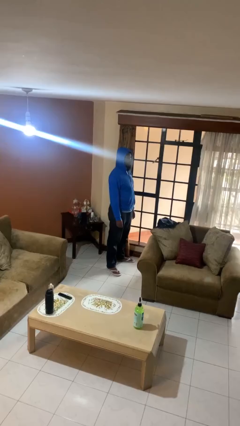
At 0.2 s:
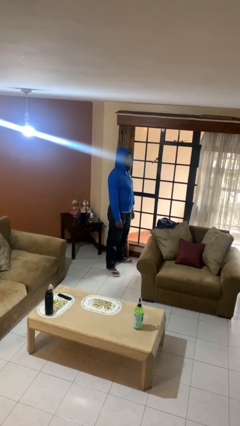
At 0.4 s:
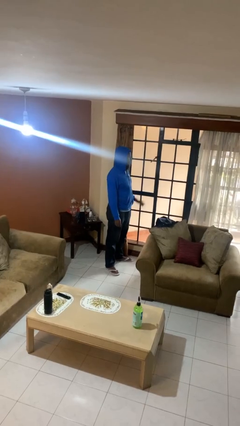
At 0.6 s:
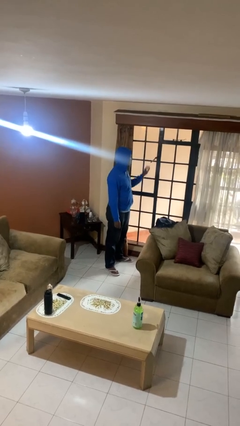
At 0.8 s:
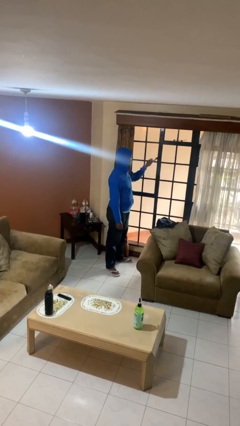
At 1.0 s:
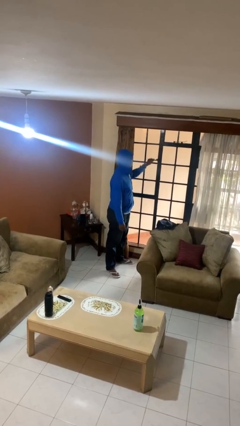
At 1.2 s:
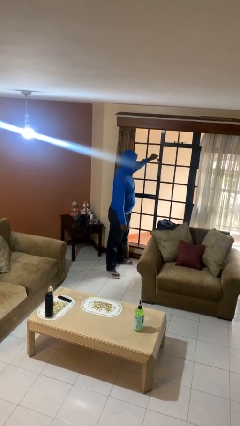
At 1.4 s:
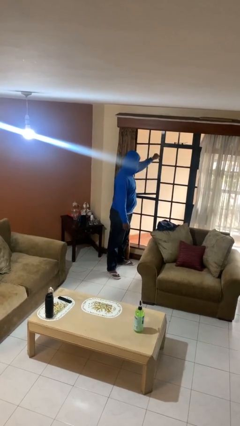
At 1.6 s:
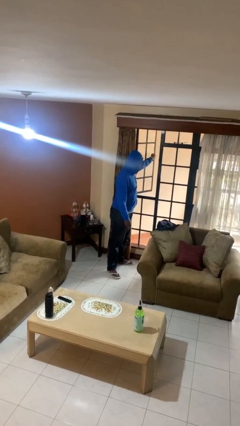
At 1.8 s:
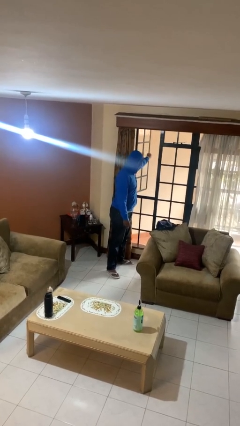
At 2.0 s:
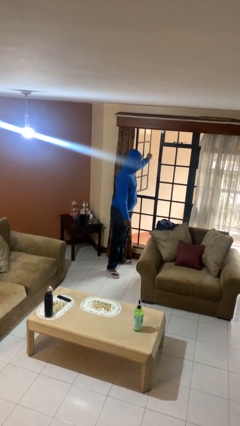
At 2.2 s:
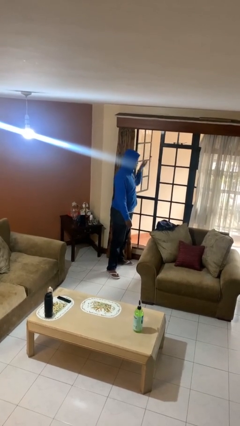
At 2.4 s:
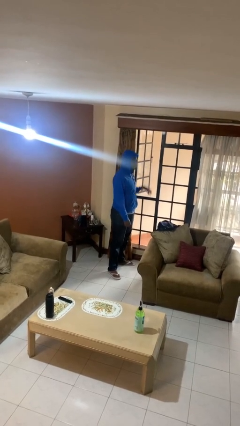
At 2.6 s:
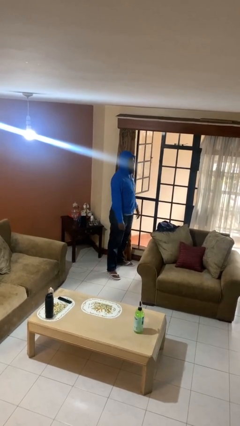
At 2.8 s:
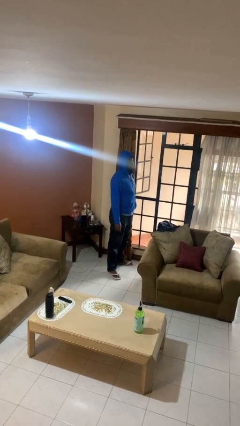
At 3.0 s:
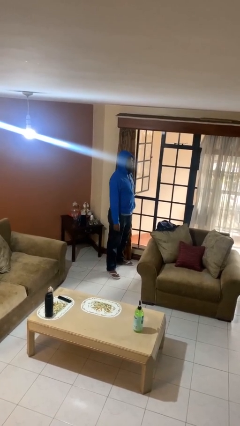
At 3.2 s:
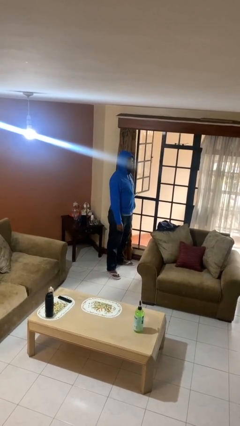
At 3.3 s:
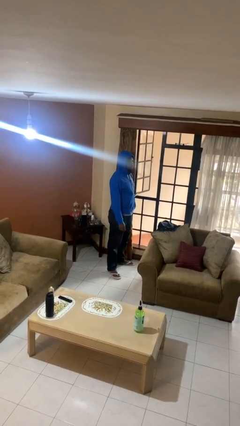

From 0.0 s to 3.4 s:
person opens home window

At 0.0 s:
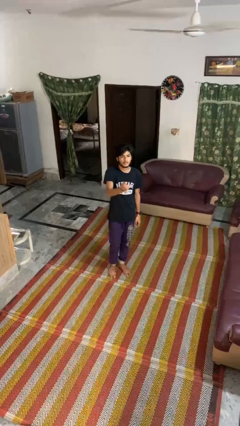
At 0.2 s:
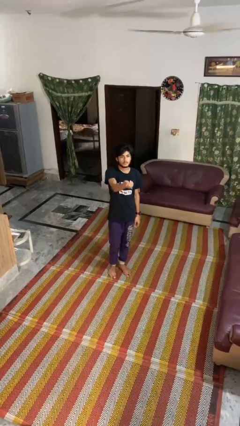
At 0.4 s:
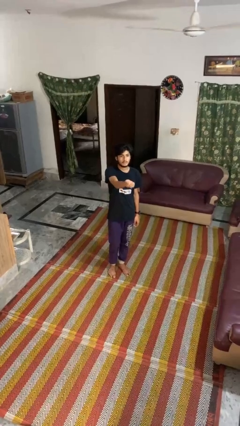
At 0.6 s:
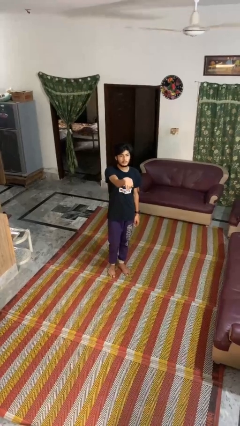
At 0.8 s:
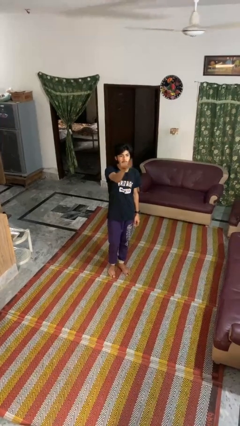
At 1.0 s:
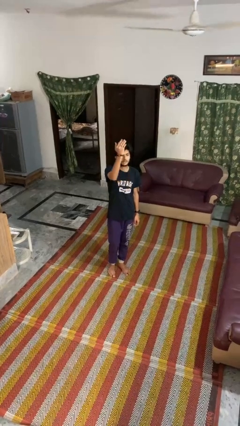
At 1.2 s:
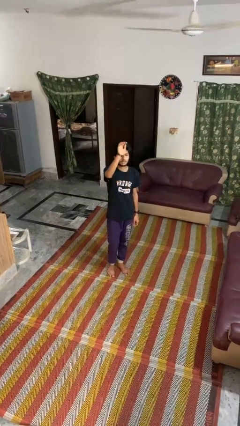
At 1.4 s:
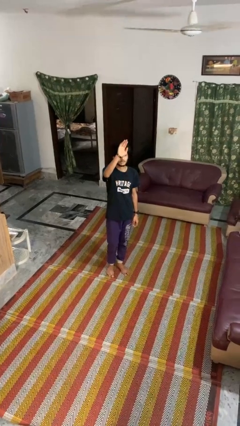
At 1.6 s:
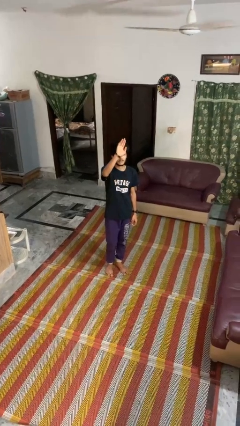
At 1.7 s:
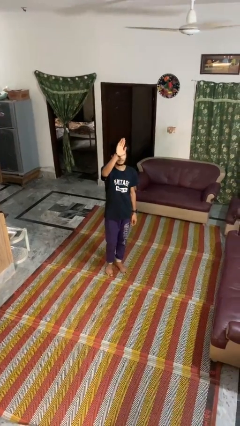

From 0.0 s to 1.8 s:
person gestures swipe up

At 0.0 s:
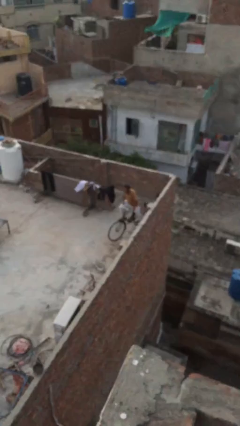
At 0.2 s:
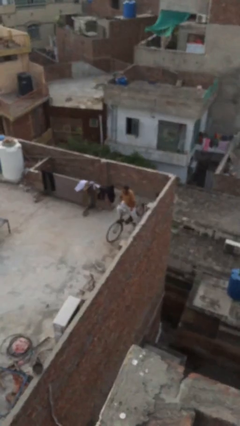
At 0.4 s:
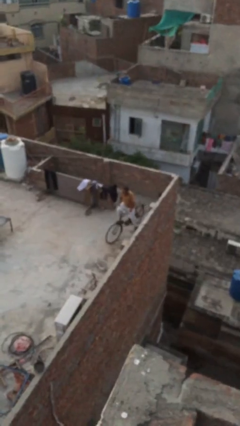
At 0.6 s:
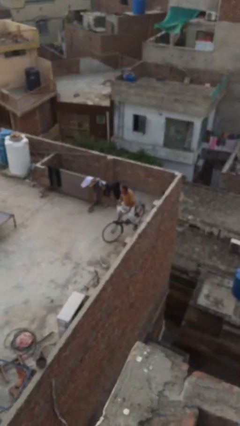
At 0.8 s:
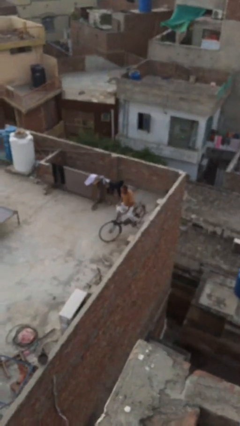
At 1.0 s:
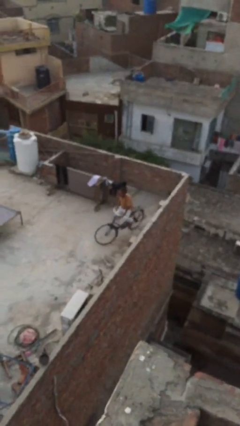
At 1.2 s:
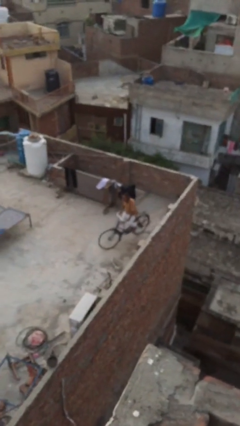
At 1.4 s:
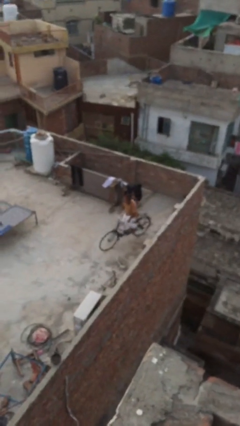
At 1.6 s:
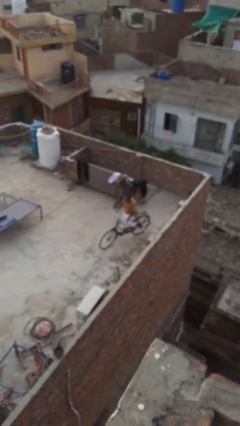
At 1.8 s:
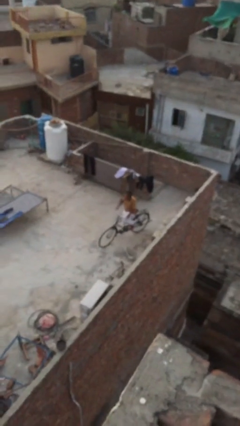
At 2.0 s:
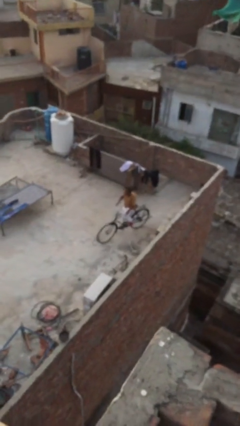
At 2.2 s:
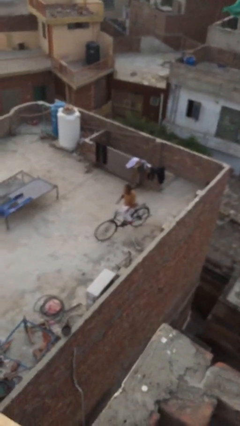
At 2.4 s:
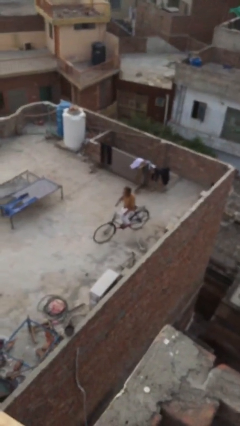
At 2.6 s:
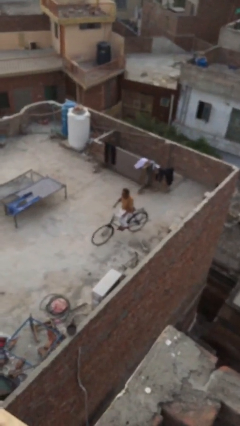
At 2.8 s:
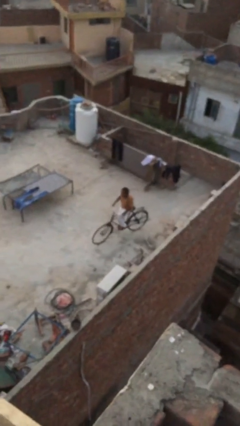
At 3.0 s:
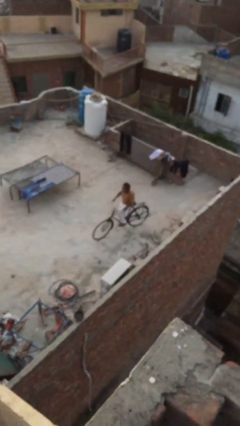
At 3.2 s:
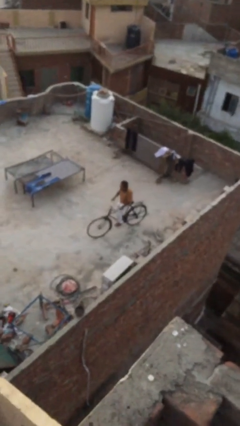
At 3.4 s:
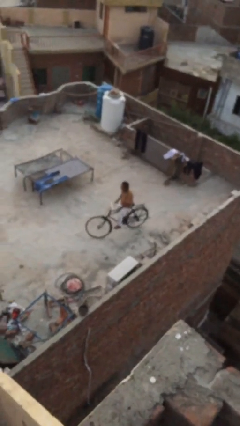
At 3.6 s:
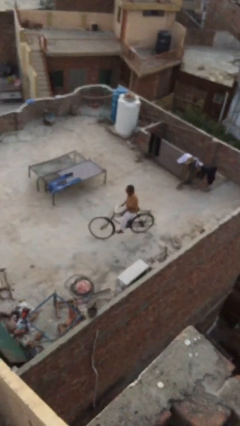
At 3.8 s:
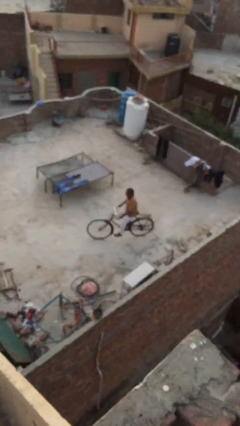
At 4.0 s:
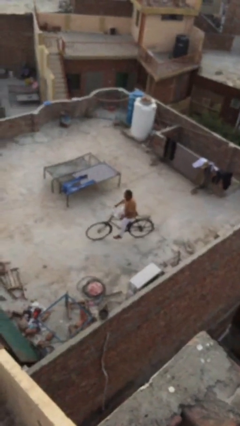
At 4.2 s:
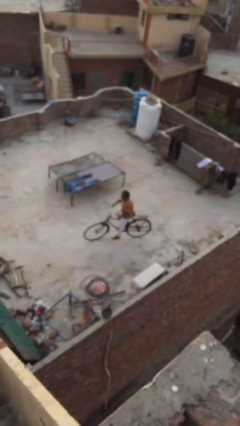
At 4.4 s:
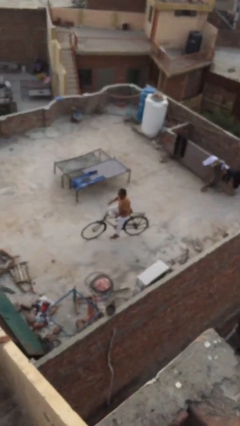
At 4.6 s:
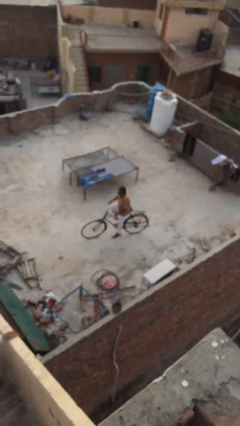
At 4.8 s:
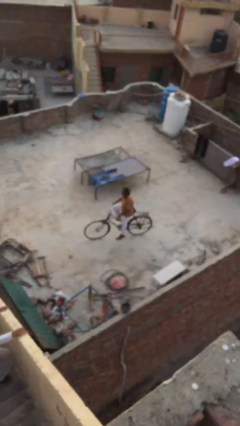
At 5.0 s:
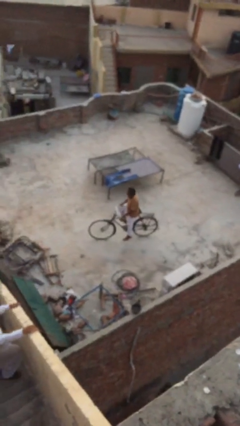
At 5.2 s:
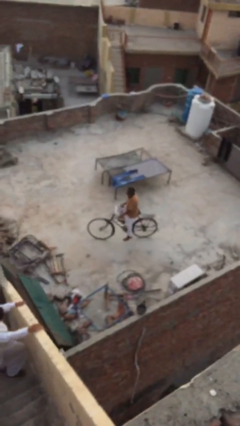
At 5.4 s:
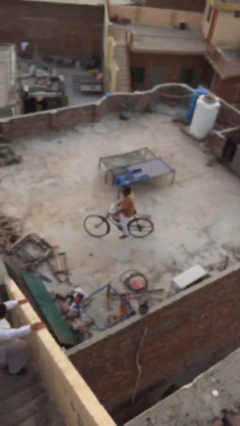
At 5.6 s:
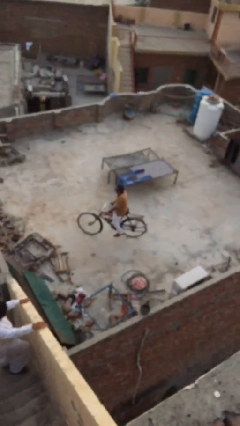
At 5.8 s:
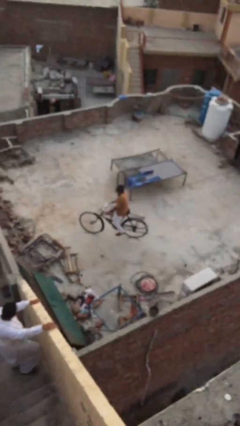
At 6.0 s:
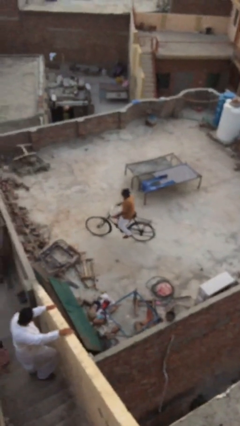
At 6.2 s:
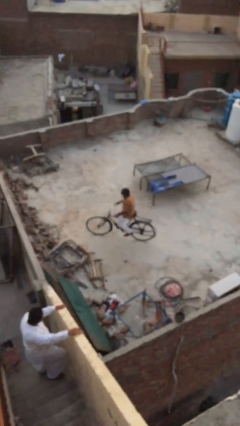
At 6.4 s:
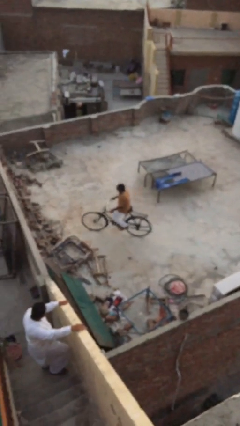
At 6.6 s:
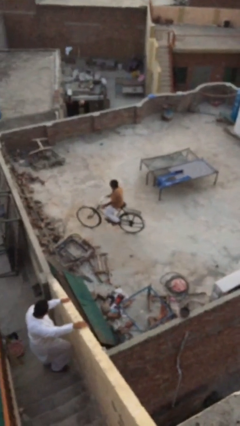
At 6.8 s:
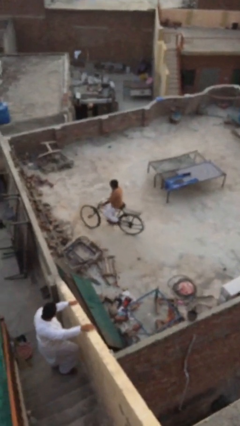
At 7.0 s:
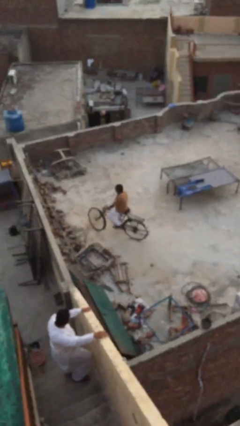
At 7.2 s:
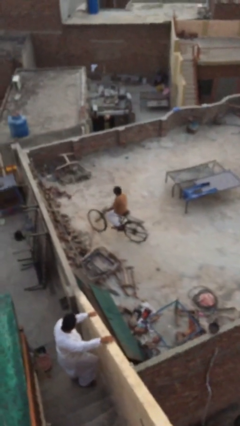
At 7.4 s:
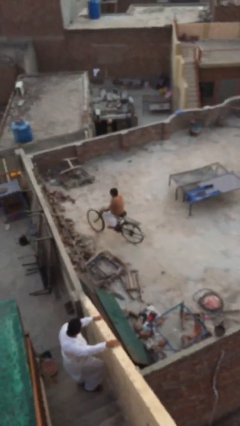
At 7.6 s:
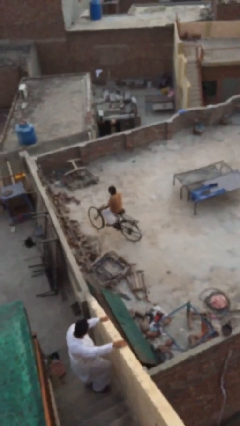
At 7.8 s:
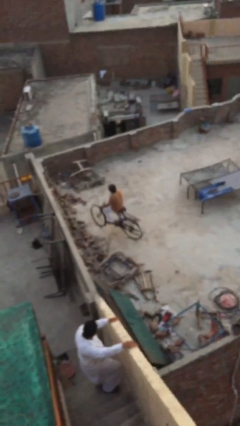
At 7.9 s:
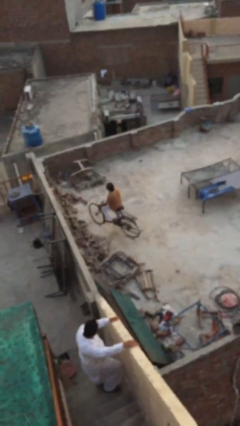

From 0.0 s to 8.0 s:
person rides bicycle

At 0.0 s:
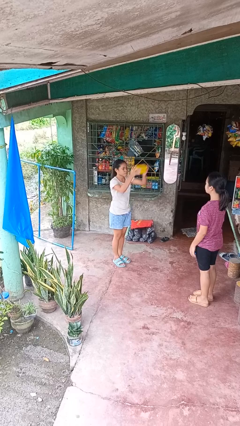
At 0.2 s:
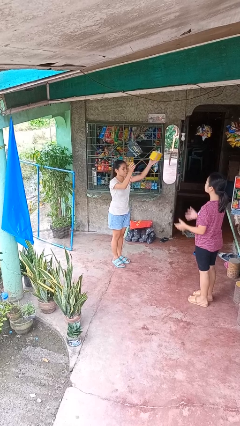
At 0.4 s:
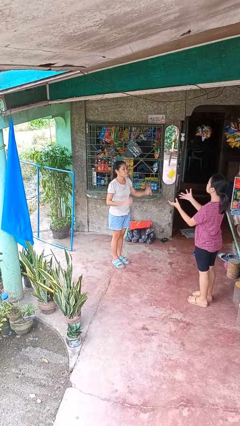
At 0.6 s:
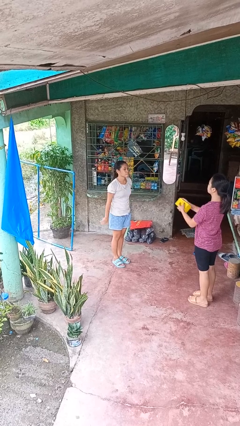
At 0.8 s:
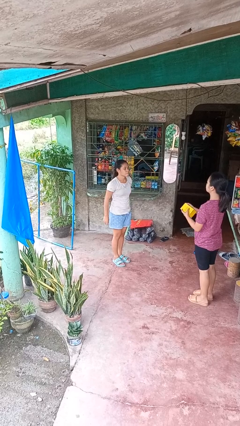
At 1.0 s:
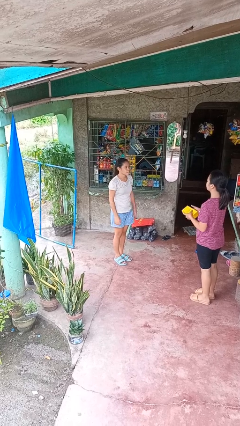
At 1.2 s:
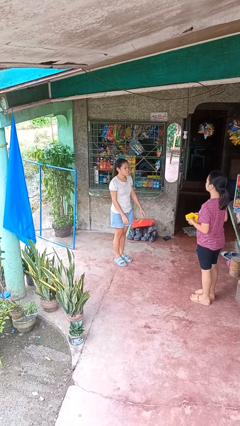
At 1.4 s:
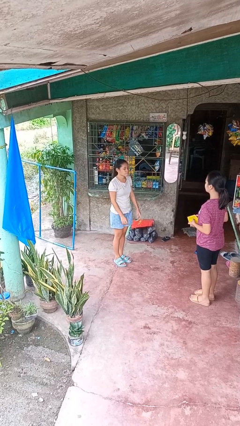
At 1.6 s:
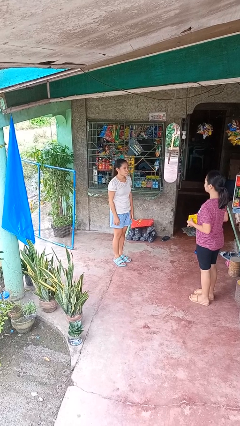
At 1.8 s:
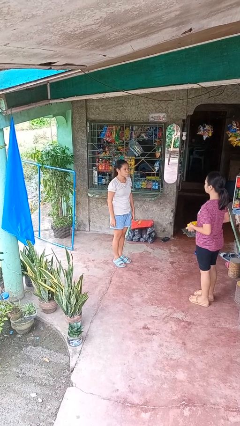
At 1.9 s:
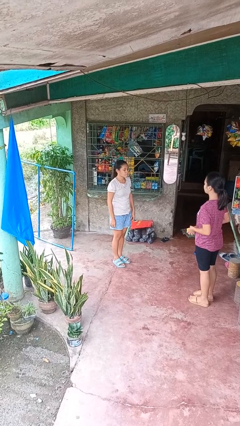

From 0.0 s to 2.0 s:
person throws object to person

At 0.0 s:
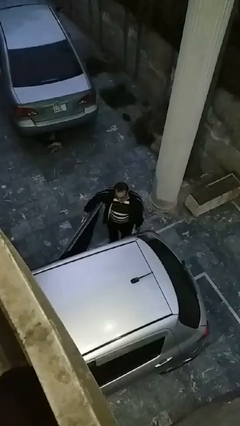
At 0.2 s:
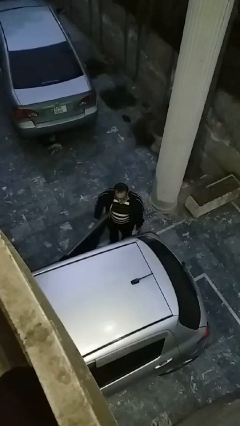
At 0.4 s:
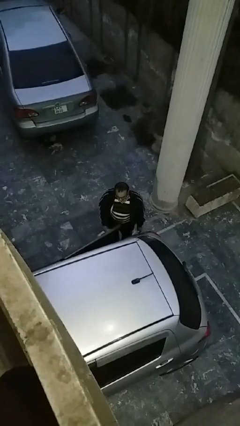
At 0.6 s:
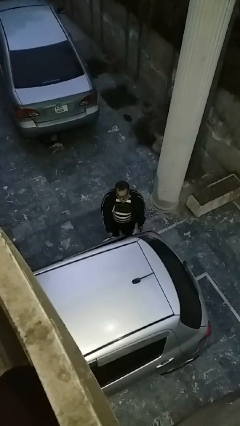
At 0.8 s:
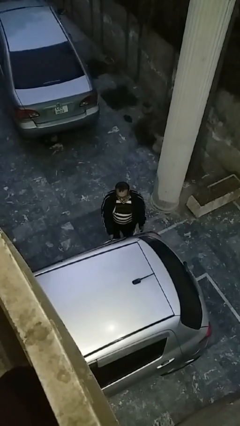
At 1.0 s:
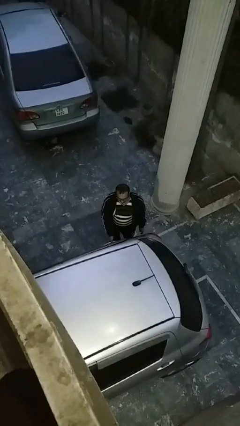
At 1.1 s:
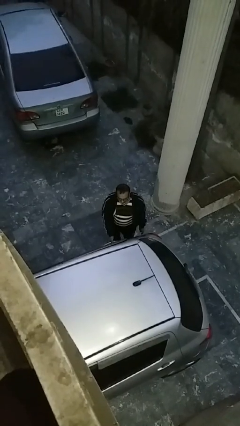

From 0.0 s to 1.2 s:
person closes car door

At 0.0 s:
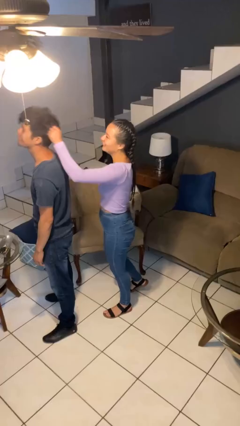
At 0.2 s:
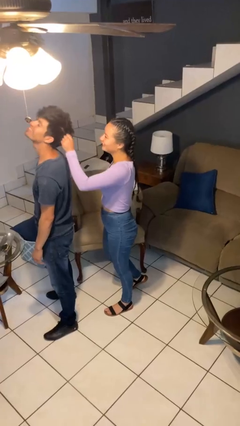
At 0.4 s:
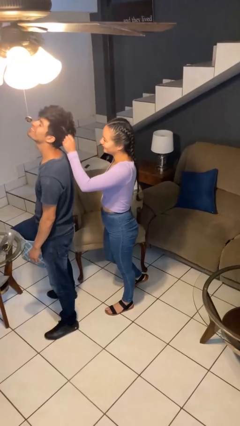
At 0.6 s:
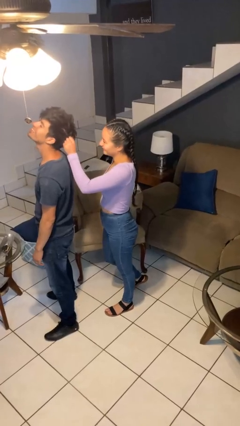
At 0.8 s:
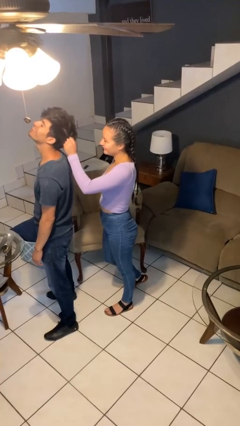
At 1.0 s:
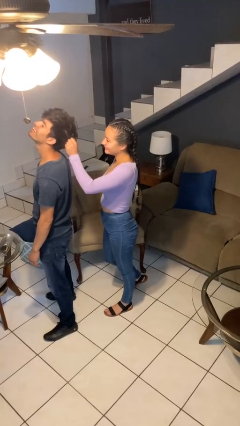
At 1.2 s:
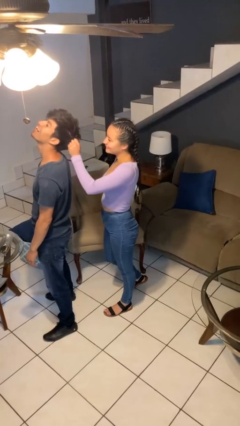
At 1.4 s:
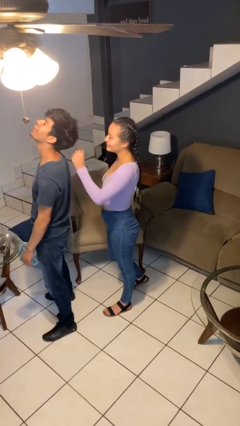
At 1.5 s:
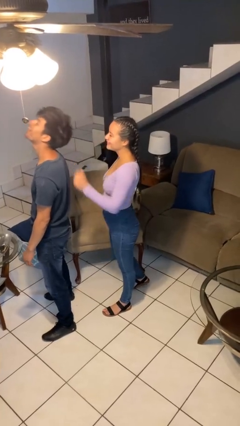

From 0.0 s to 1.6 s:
person grabs person by hair
